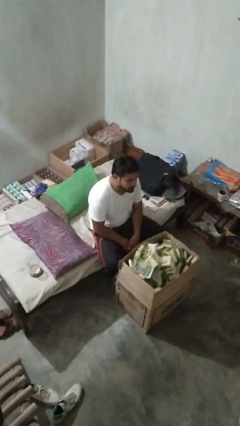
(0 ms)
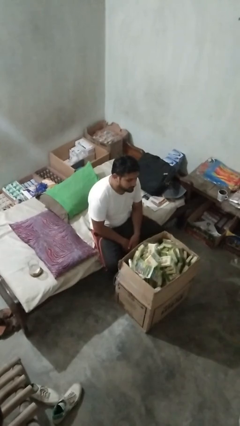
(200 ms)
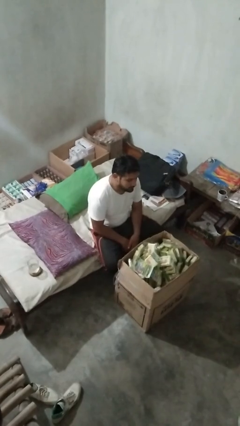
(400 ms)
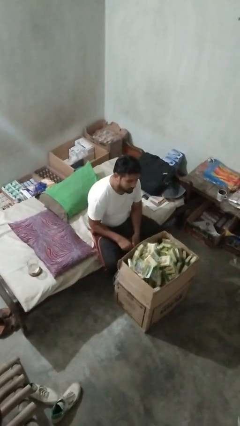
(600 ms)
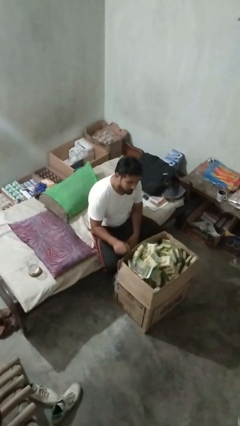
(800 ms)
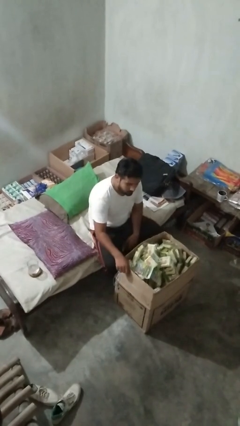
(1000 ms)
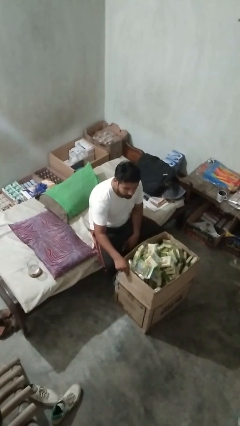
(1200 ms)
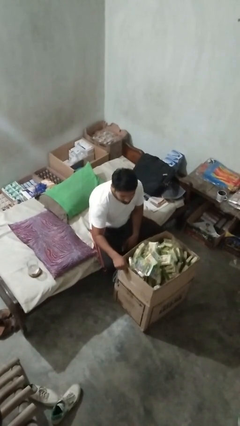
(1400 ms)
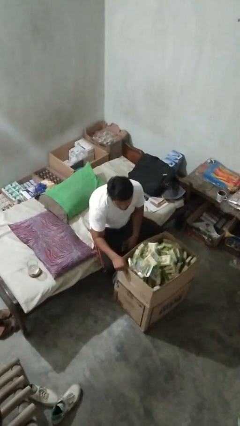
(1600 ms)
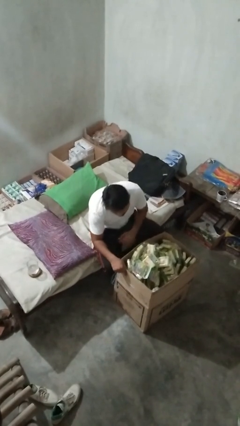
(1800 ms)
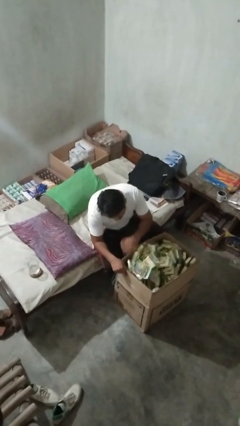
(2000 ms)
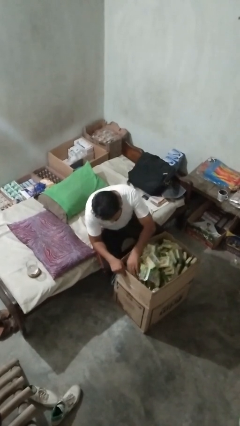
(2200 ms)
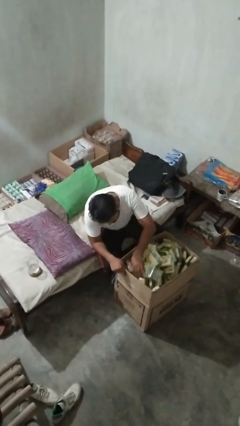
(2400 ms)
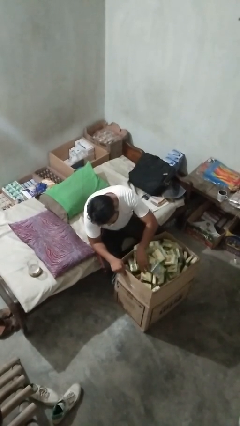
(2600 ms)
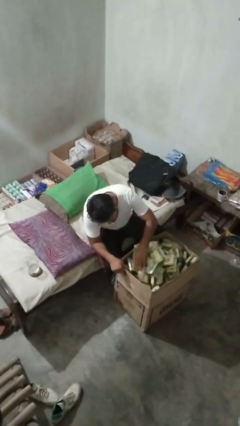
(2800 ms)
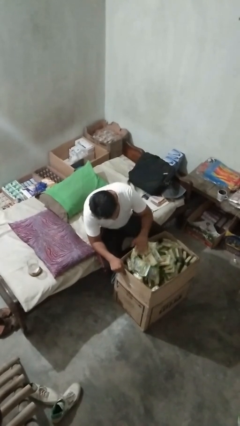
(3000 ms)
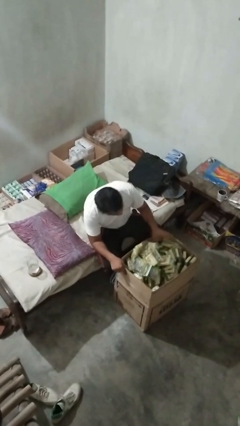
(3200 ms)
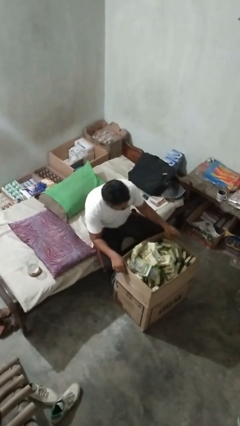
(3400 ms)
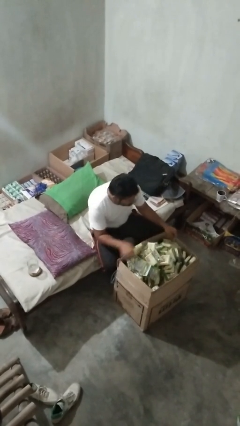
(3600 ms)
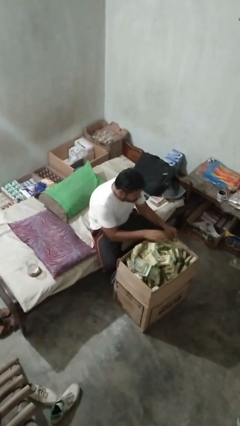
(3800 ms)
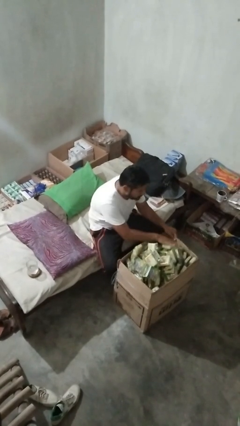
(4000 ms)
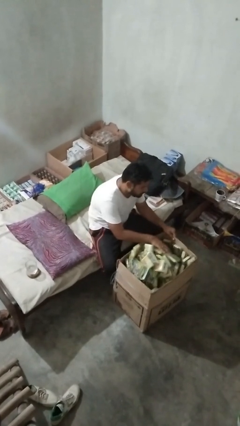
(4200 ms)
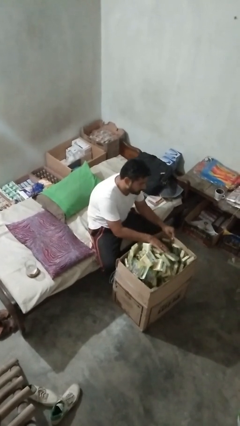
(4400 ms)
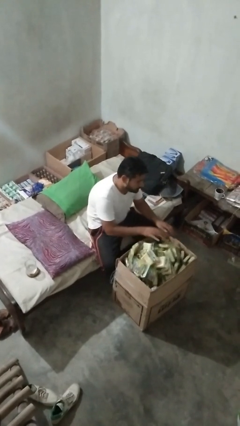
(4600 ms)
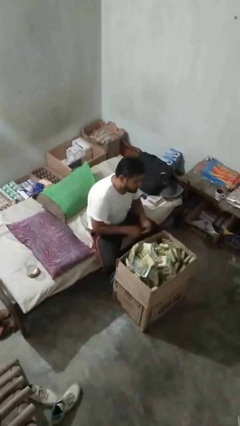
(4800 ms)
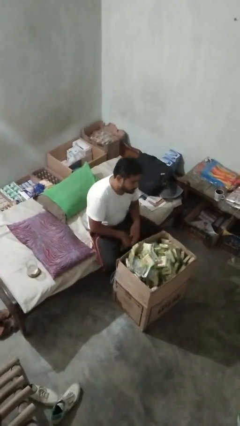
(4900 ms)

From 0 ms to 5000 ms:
person searches in box

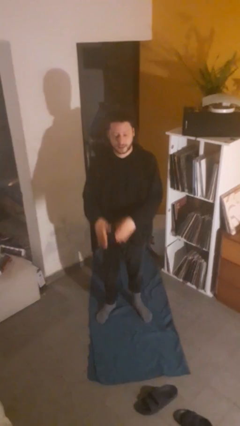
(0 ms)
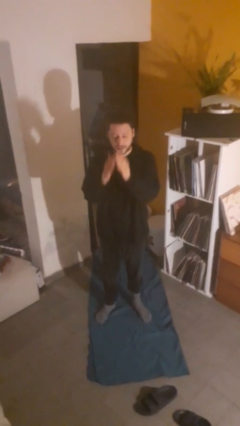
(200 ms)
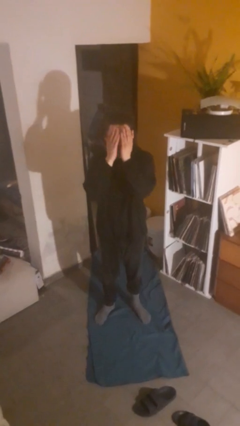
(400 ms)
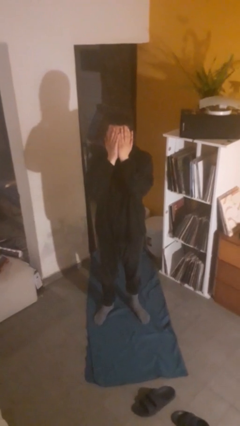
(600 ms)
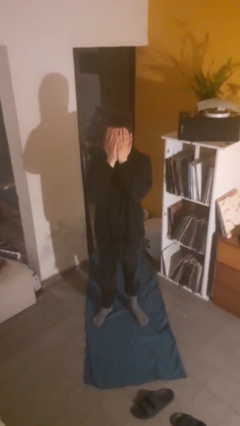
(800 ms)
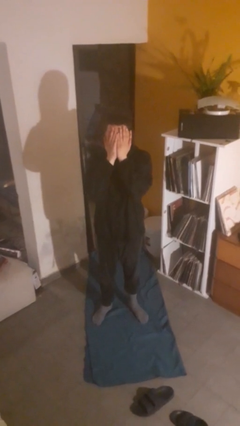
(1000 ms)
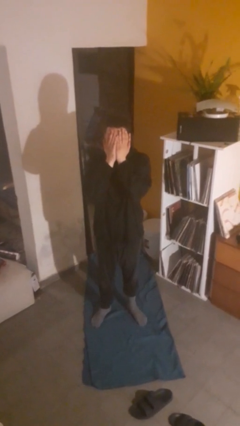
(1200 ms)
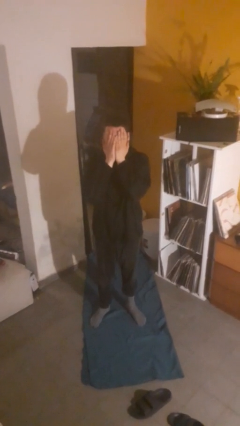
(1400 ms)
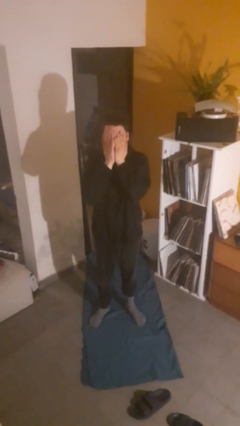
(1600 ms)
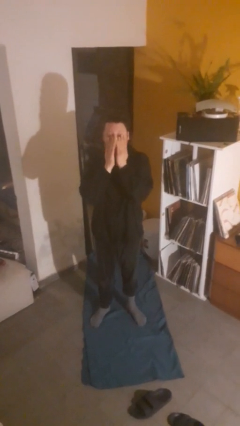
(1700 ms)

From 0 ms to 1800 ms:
person covers face with hands

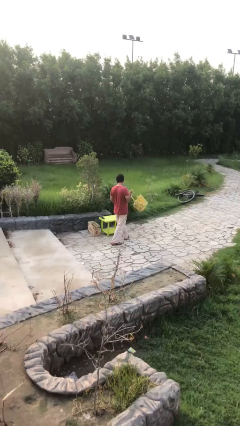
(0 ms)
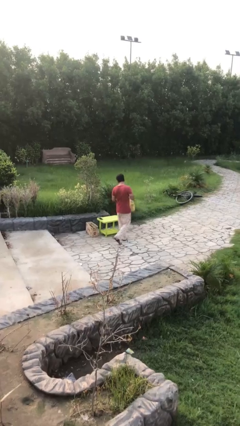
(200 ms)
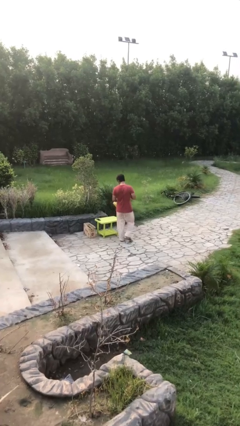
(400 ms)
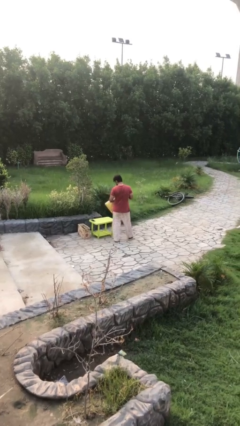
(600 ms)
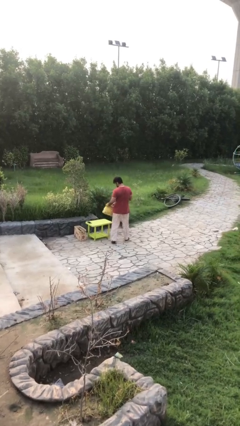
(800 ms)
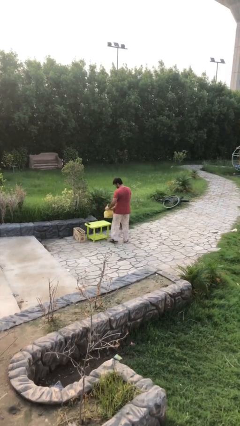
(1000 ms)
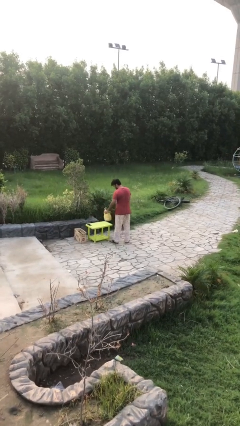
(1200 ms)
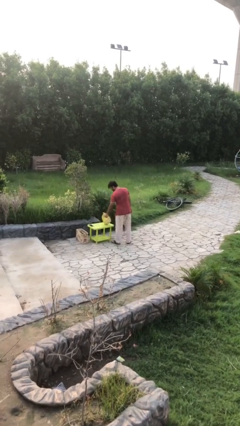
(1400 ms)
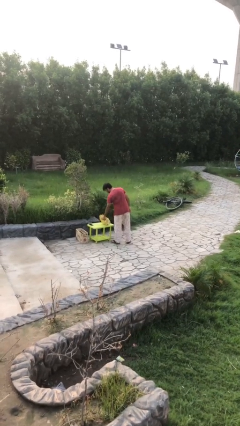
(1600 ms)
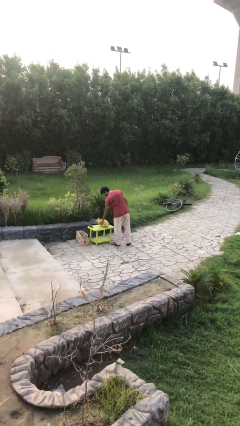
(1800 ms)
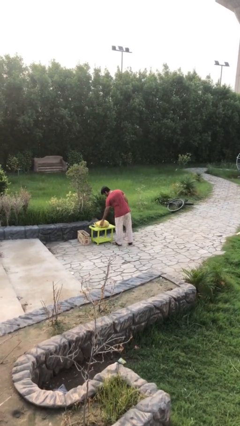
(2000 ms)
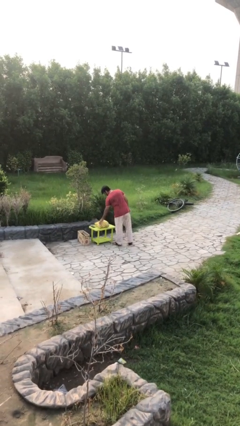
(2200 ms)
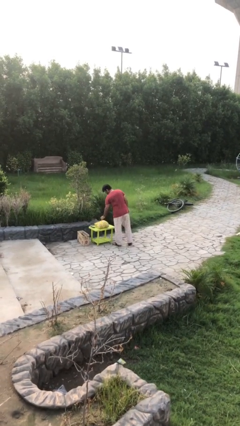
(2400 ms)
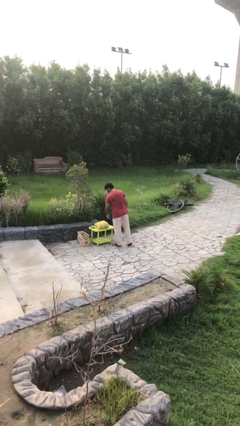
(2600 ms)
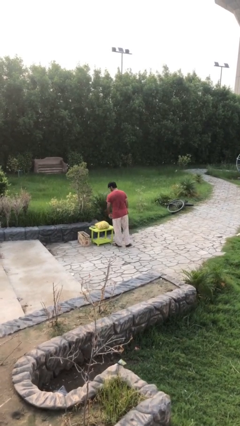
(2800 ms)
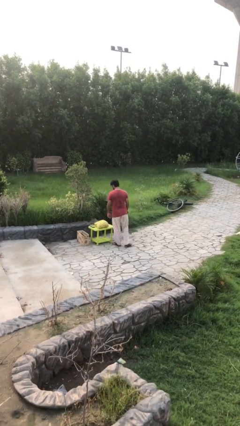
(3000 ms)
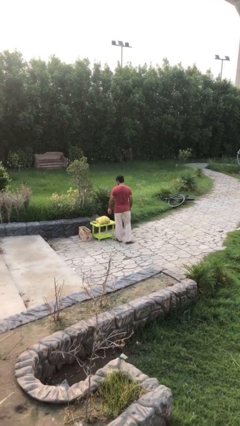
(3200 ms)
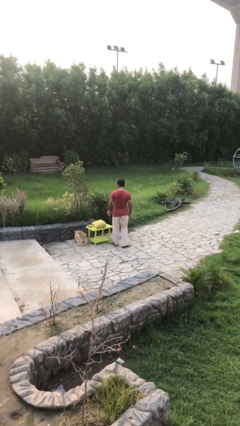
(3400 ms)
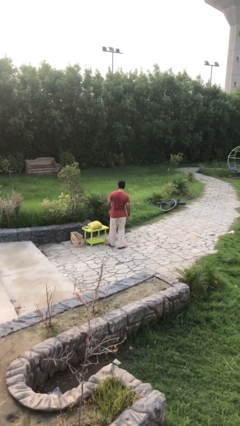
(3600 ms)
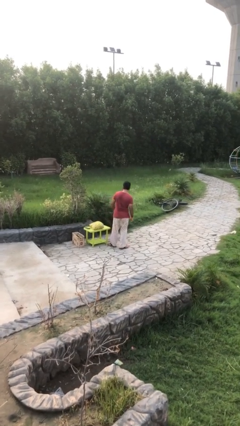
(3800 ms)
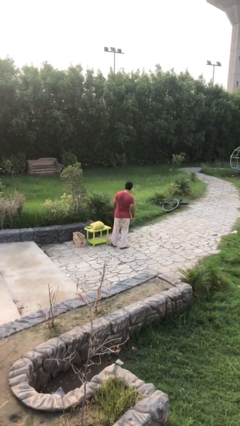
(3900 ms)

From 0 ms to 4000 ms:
person puts down object on table

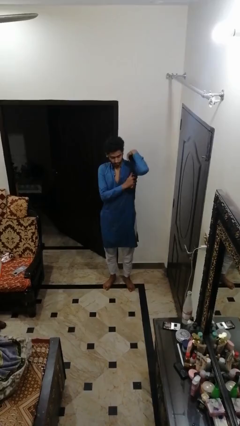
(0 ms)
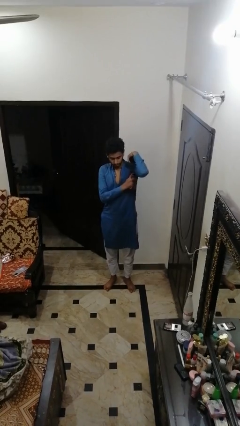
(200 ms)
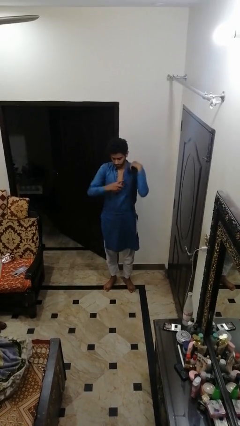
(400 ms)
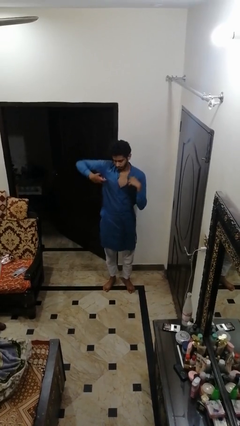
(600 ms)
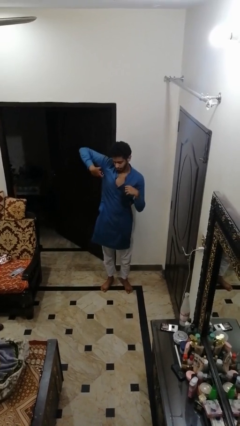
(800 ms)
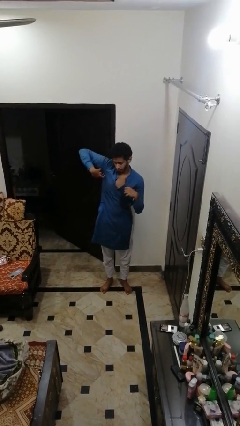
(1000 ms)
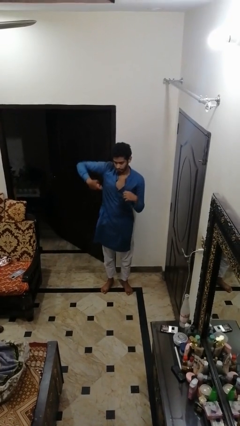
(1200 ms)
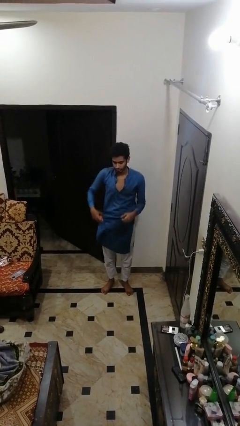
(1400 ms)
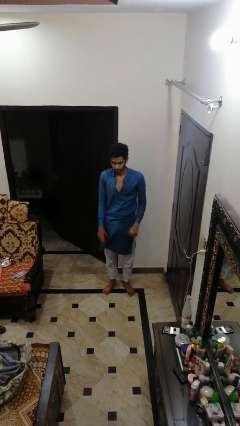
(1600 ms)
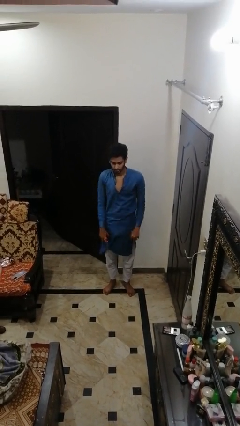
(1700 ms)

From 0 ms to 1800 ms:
person applies deodorant

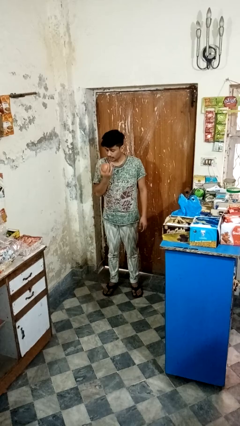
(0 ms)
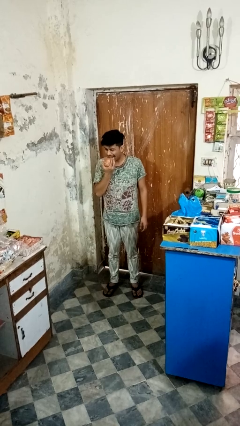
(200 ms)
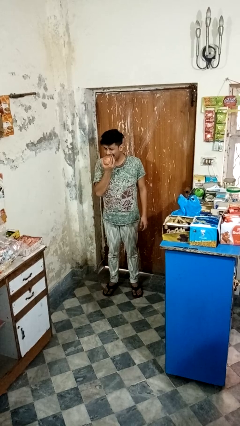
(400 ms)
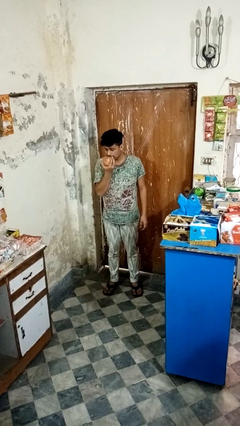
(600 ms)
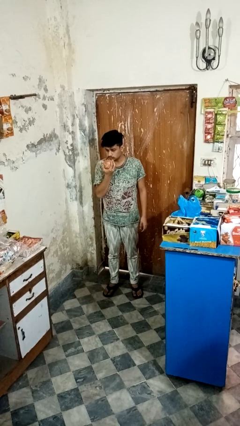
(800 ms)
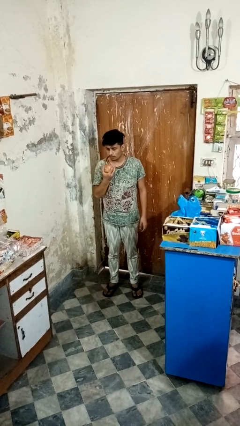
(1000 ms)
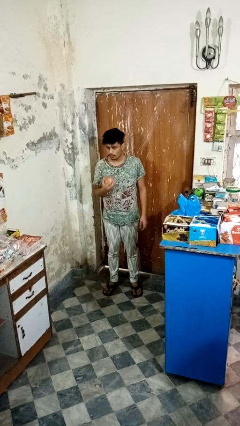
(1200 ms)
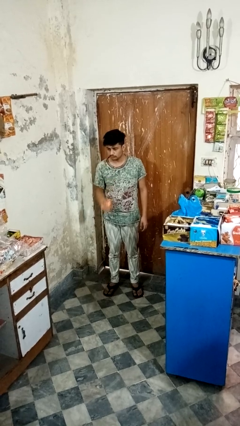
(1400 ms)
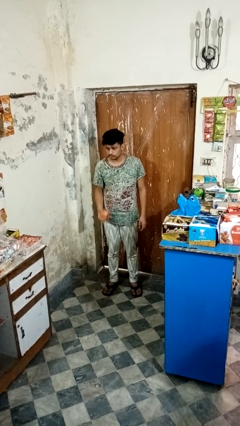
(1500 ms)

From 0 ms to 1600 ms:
person eats apple

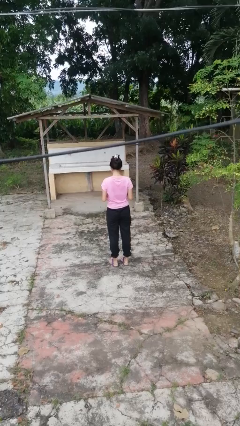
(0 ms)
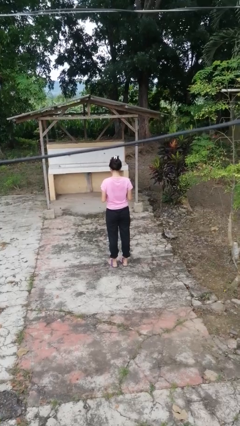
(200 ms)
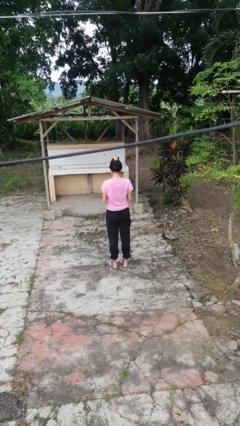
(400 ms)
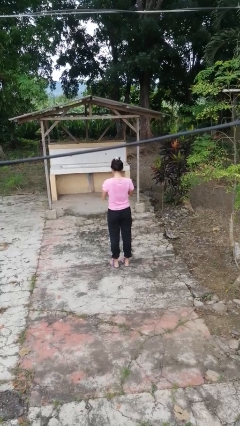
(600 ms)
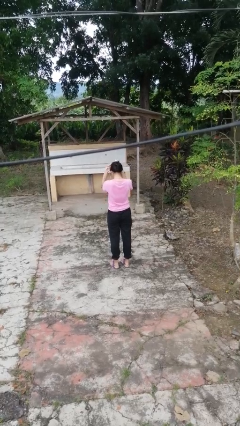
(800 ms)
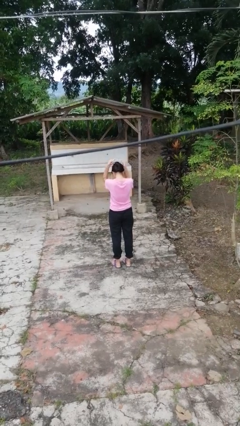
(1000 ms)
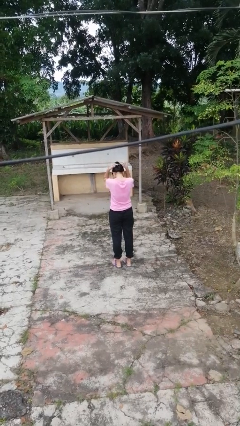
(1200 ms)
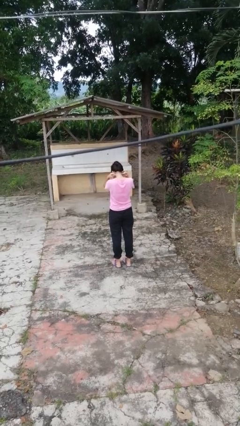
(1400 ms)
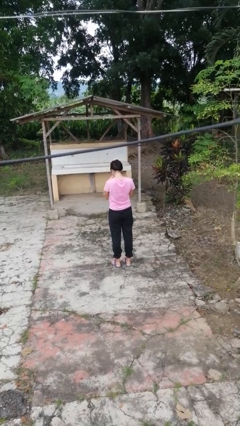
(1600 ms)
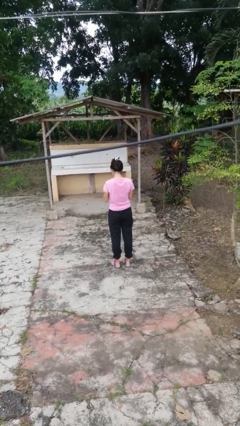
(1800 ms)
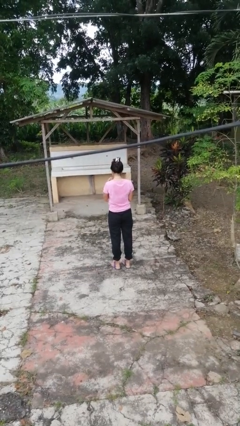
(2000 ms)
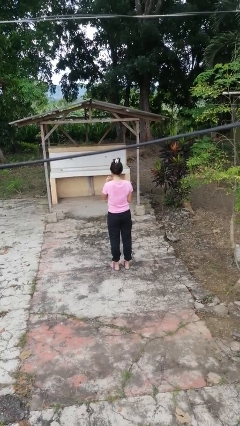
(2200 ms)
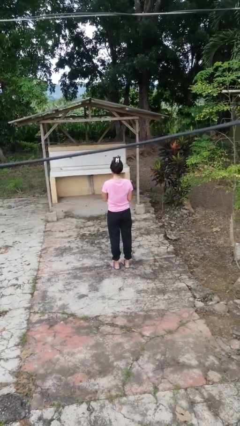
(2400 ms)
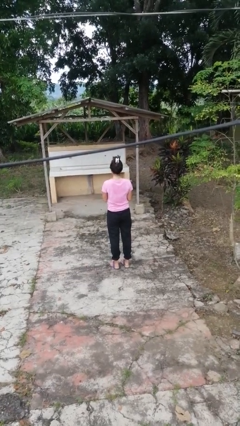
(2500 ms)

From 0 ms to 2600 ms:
person puts on necklace

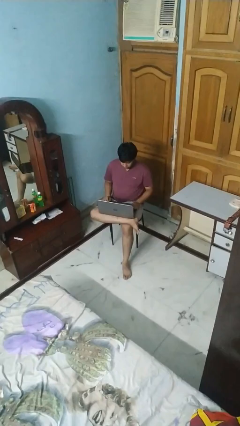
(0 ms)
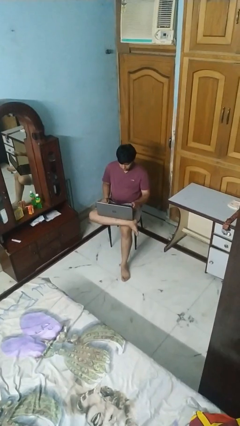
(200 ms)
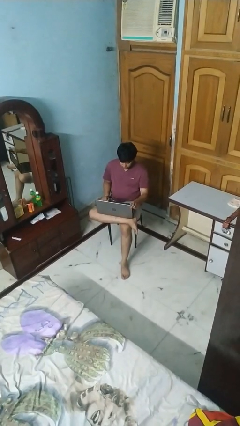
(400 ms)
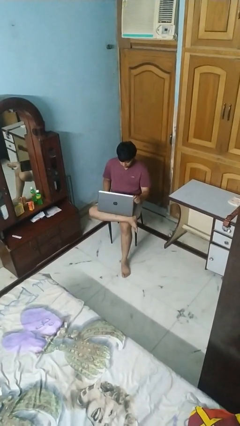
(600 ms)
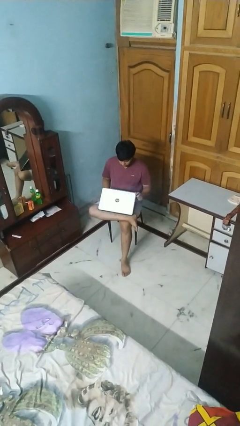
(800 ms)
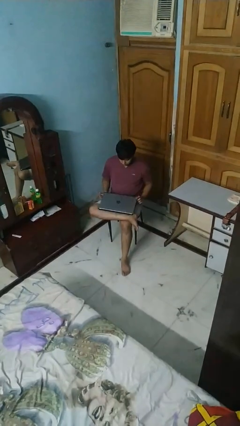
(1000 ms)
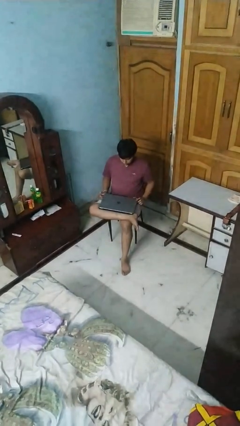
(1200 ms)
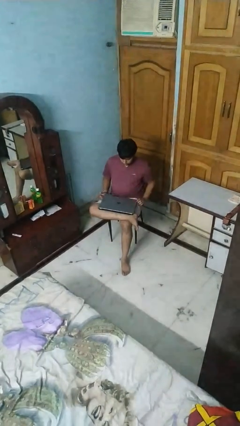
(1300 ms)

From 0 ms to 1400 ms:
person closes laptop
